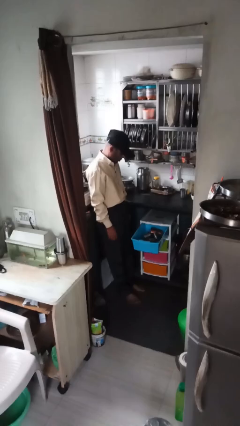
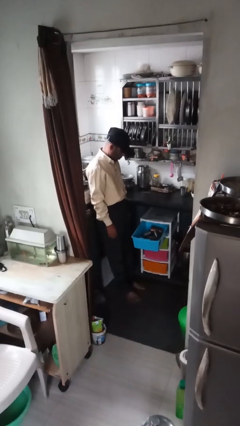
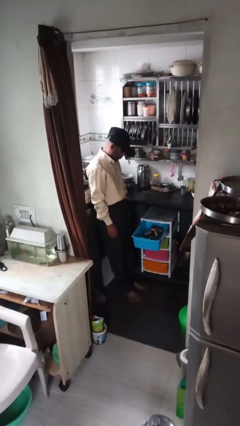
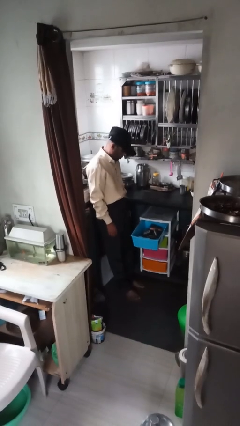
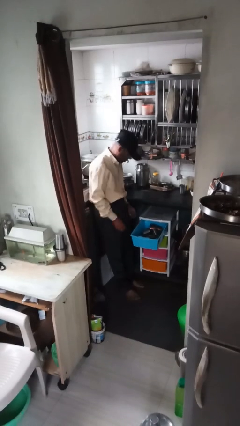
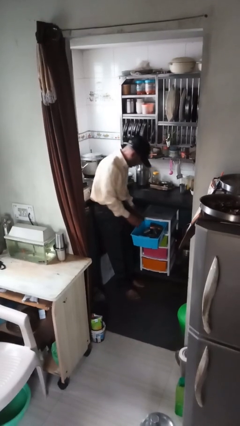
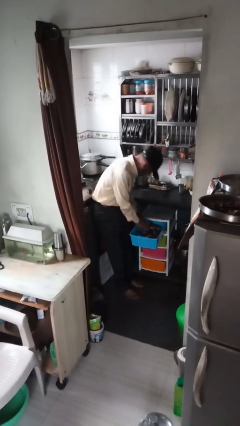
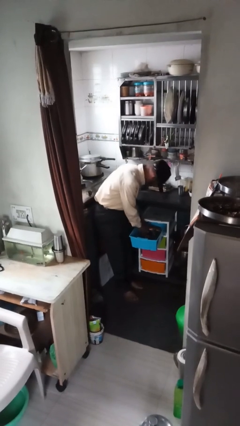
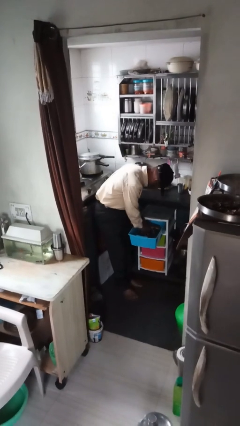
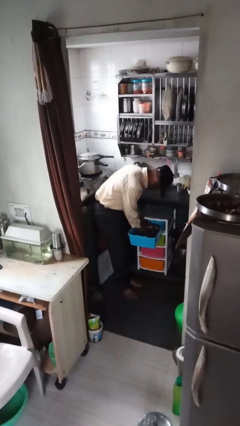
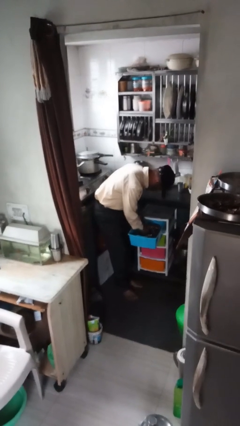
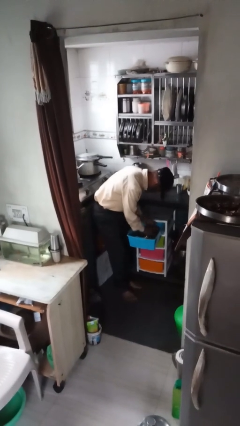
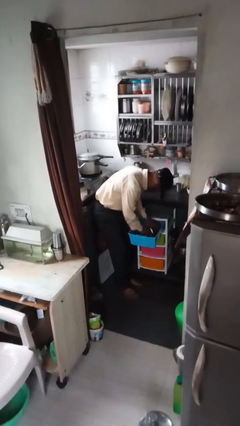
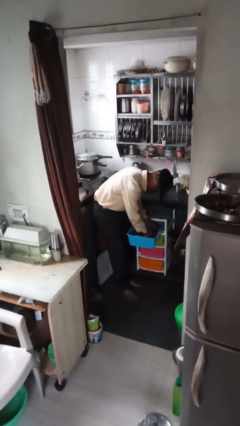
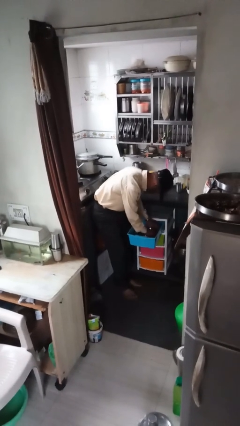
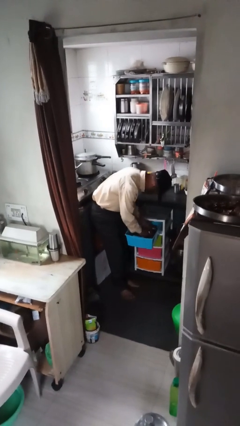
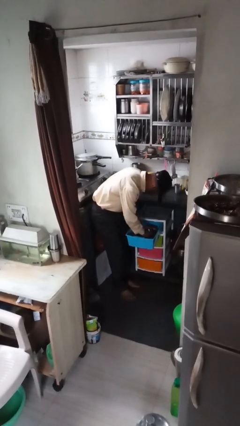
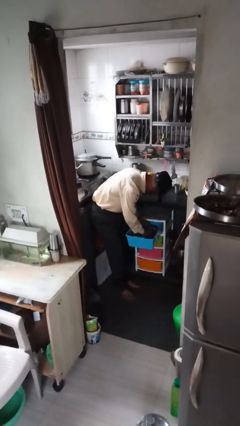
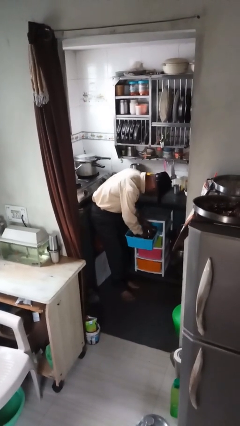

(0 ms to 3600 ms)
person searches in kitchen drawer

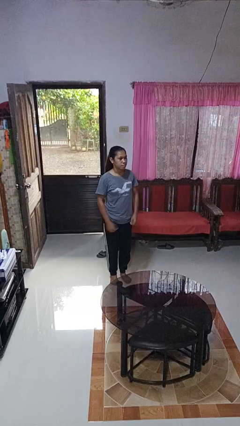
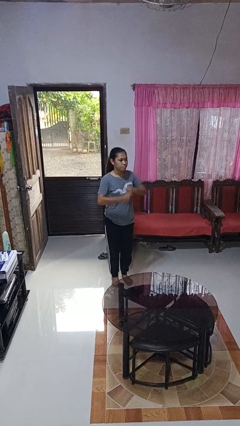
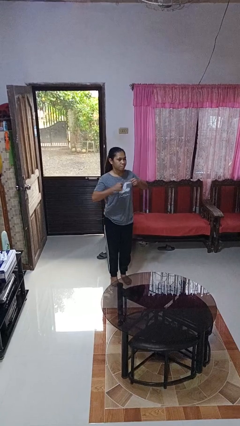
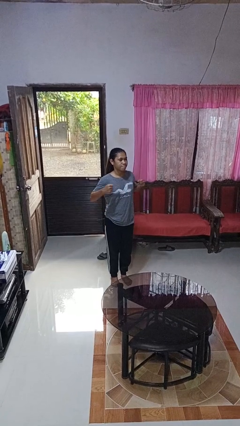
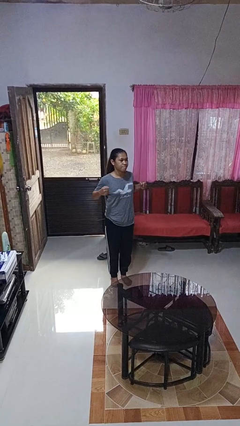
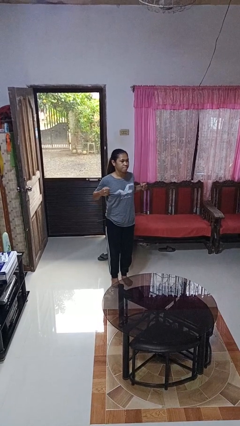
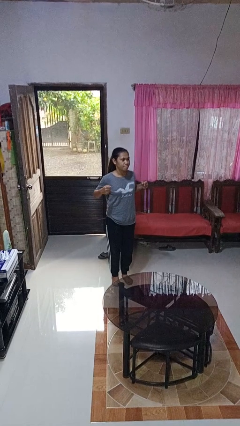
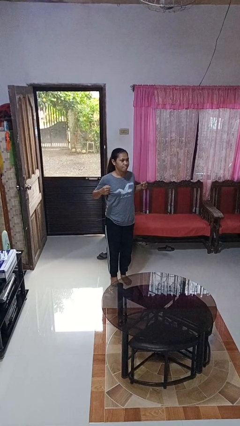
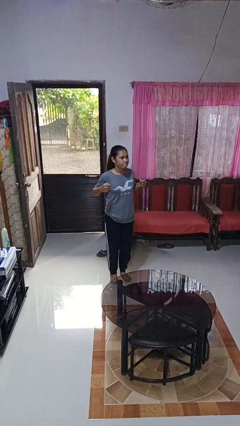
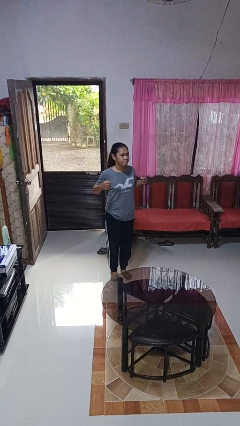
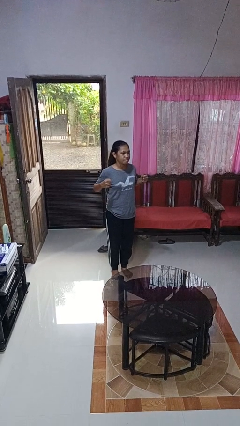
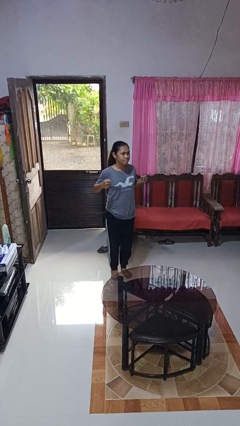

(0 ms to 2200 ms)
person gestures zoom in

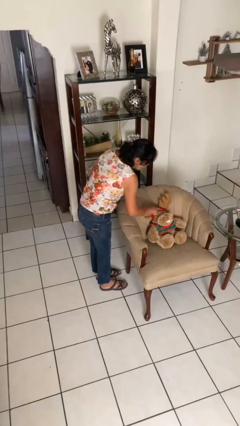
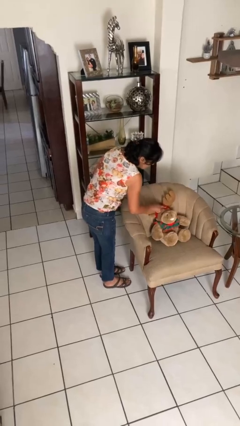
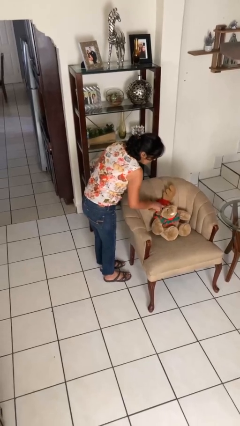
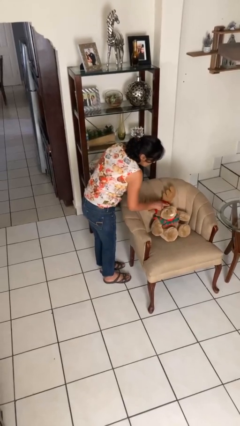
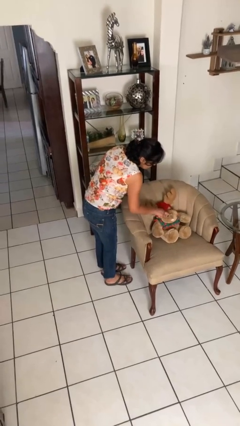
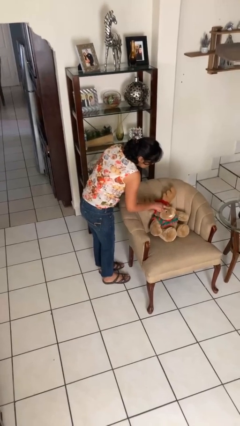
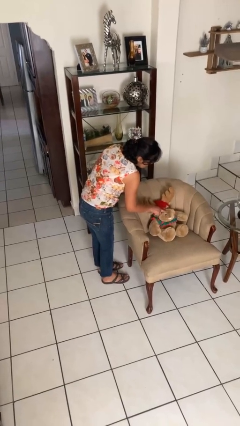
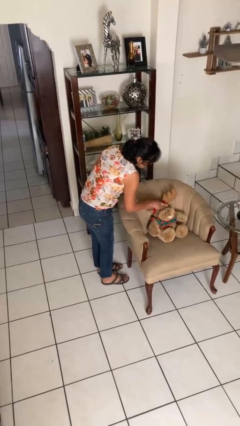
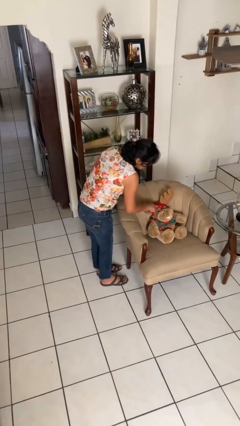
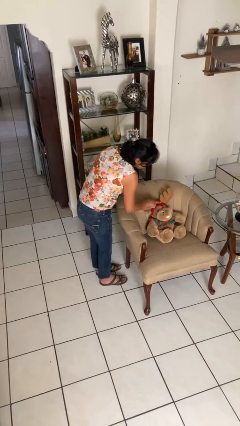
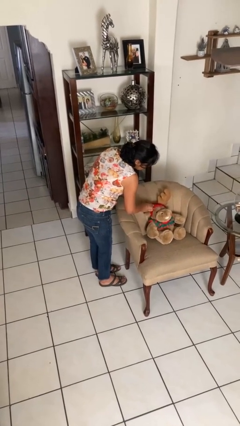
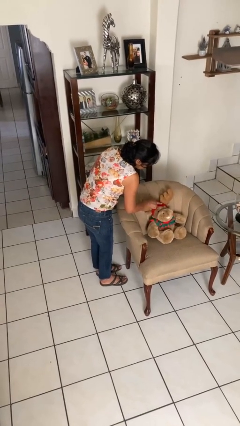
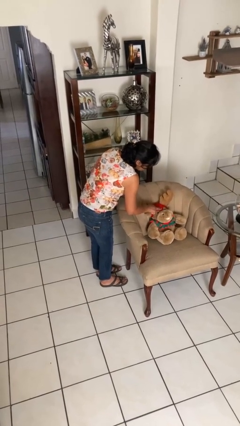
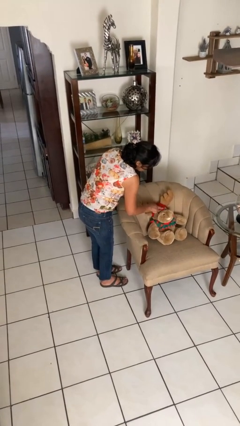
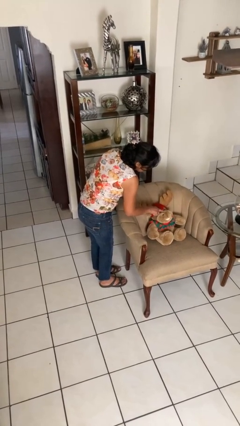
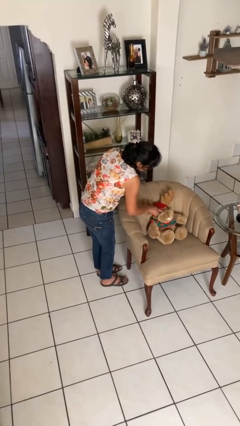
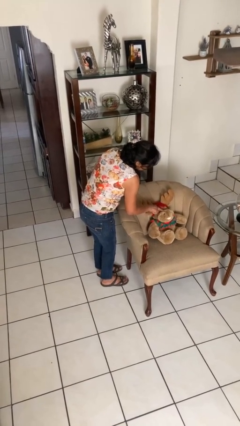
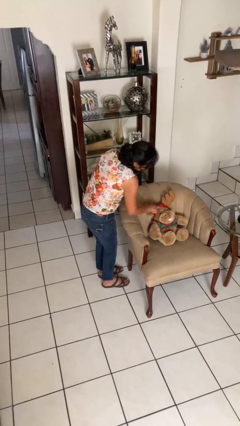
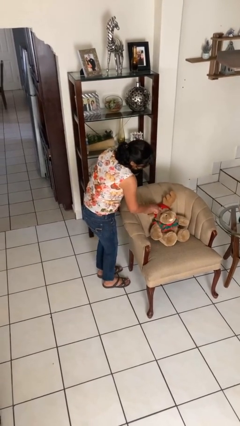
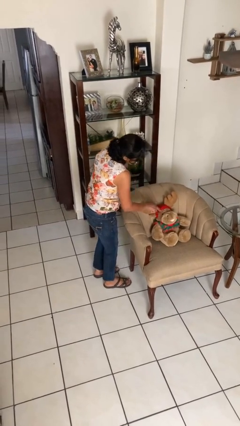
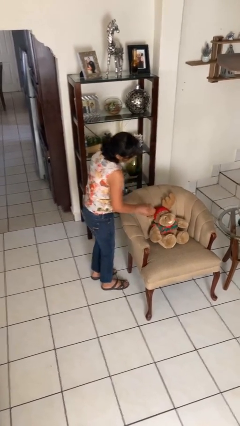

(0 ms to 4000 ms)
person taps object with finger

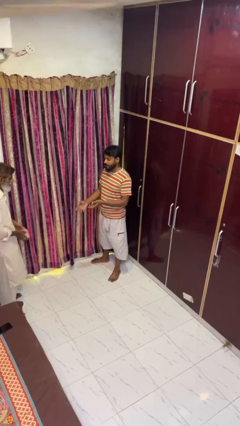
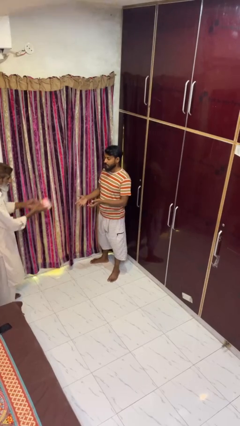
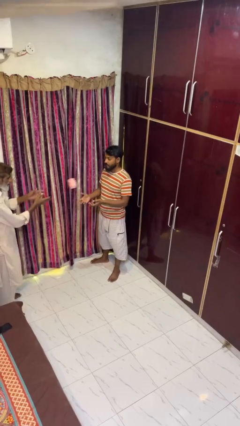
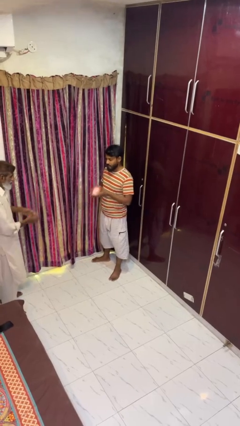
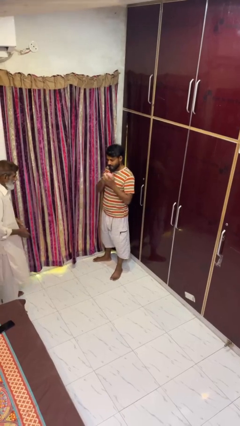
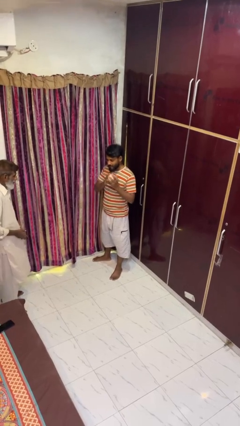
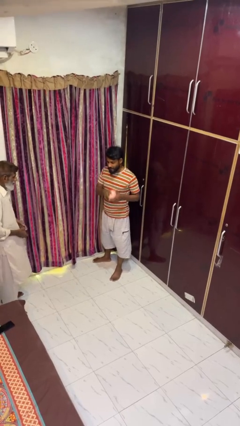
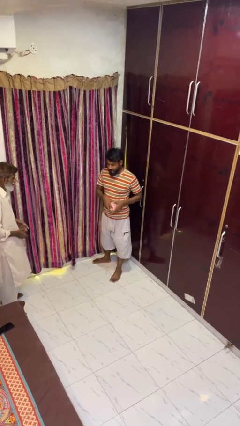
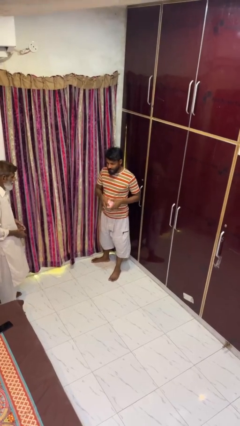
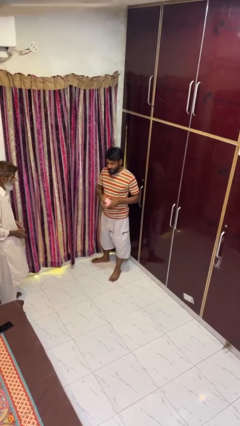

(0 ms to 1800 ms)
person catches object from person

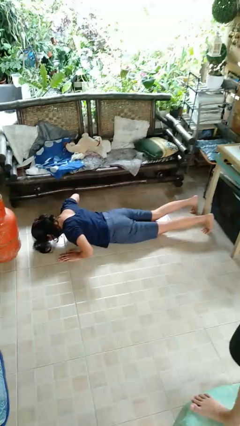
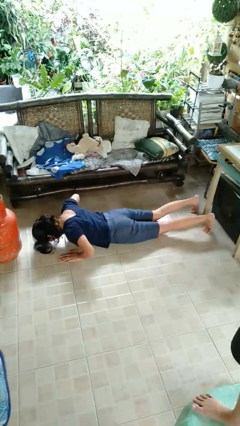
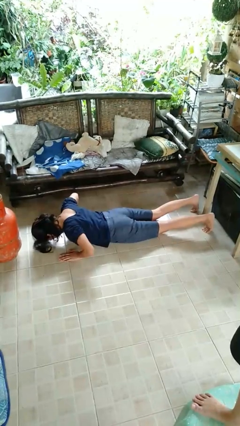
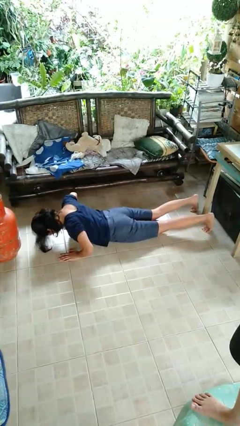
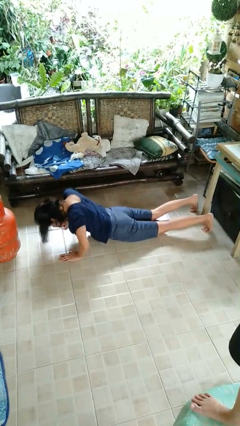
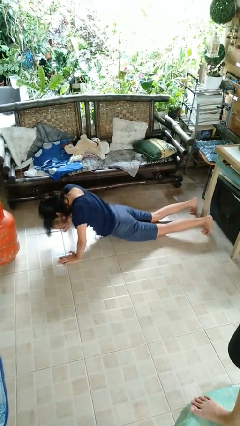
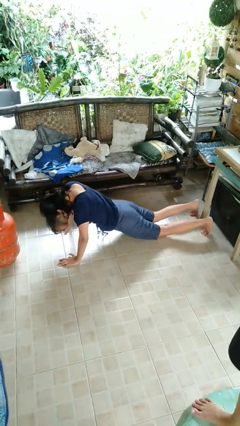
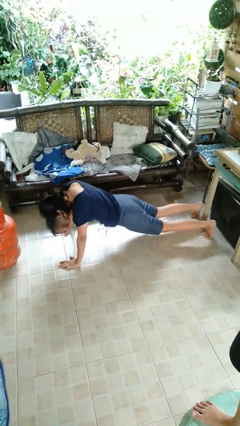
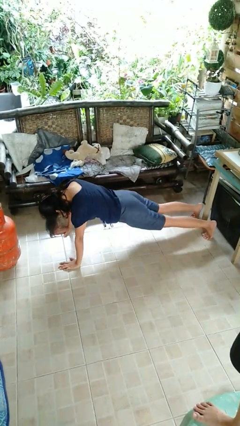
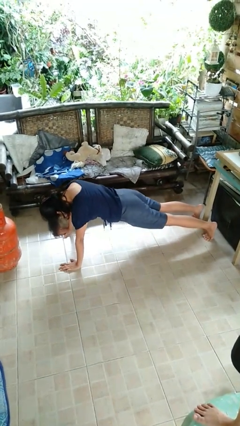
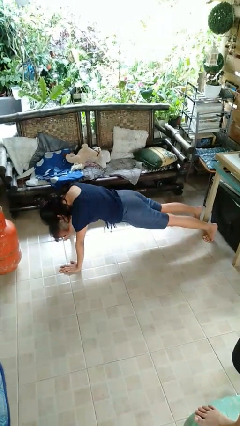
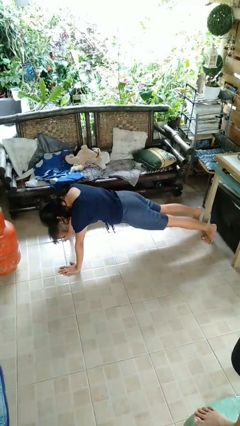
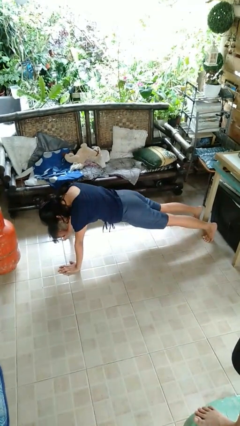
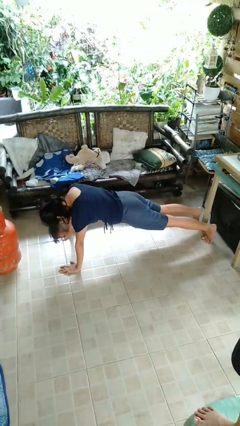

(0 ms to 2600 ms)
person exercises with pushup

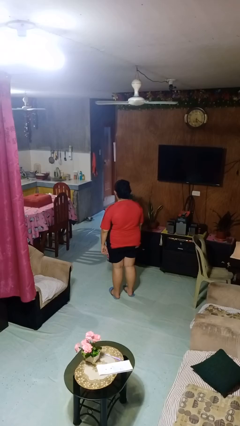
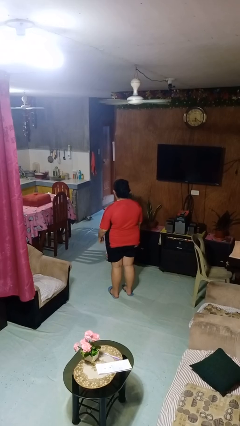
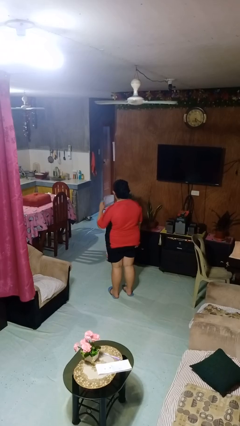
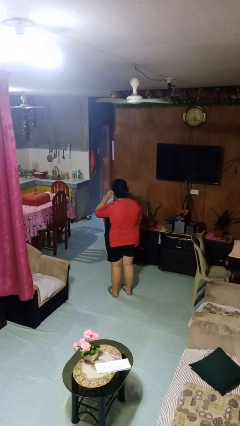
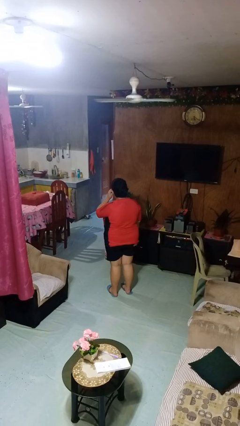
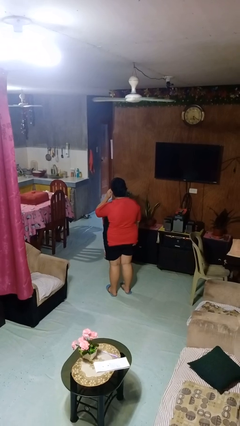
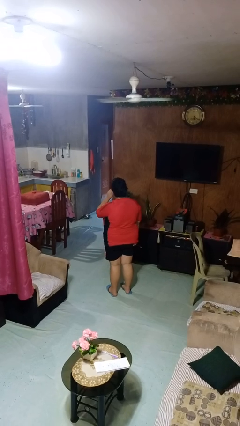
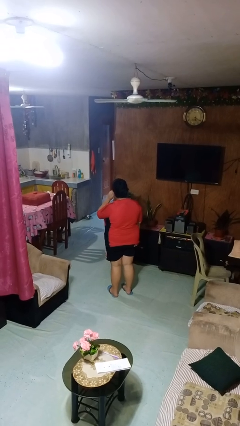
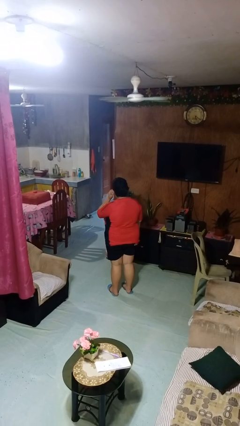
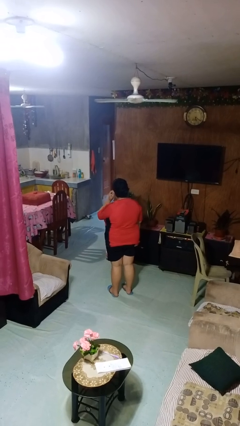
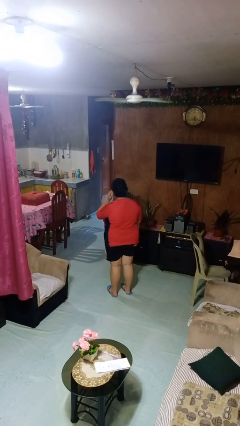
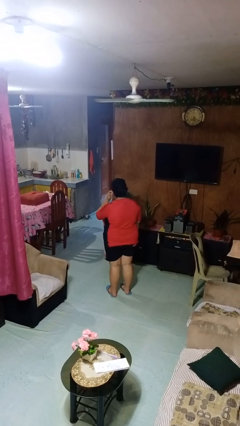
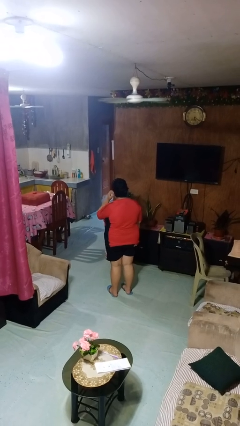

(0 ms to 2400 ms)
person touches earlobe

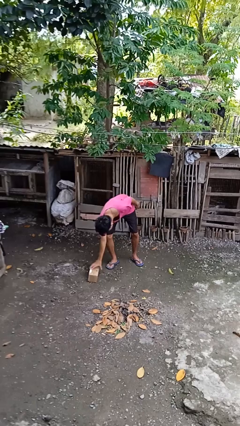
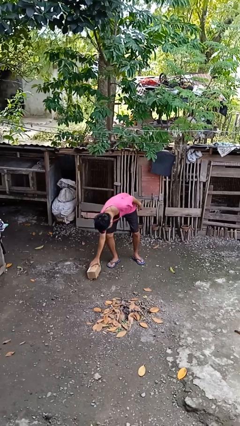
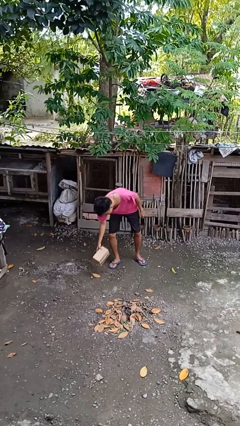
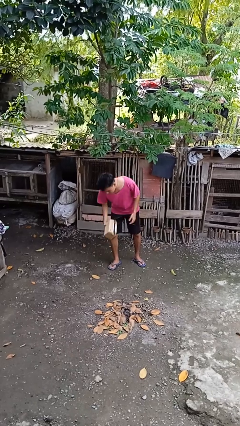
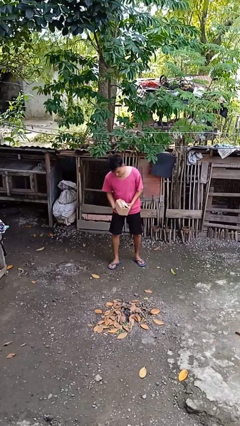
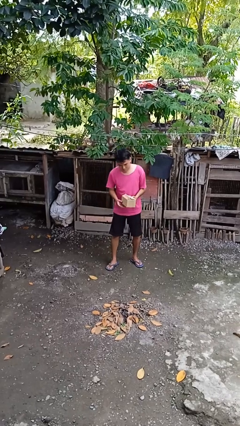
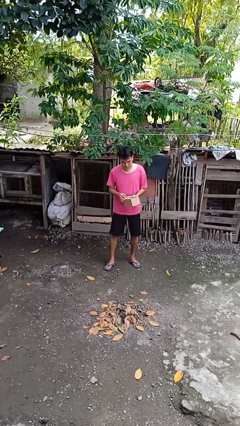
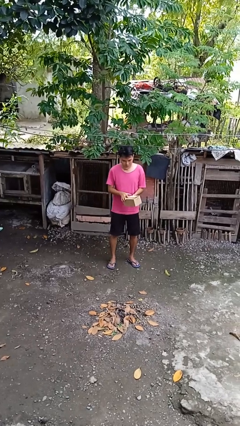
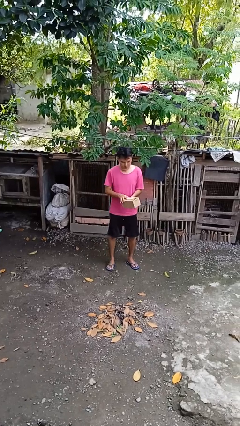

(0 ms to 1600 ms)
person picks up object from floor
